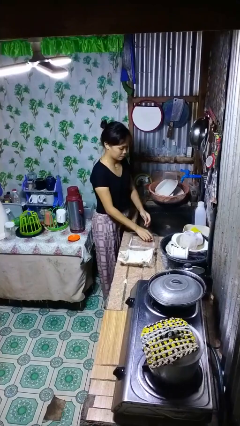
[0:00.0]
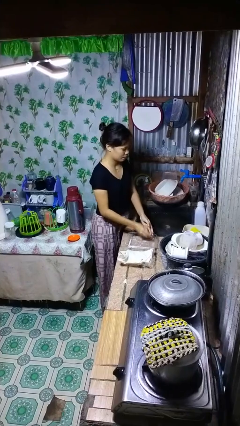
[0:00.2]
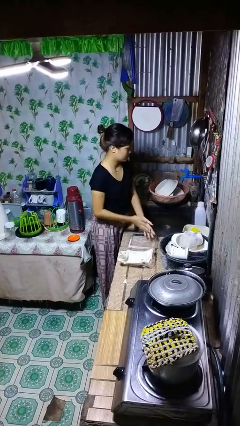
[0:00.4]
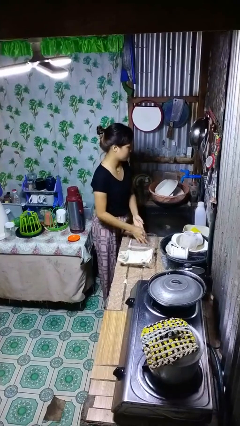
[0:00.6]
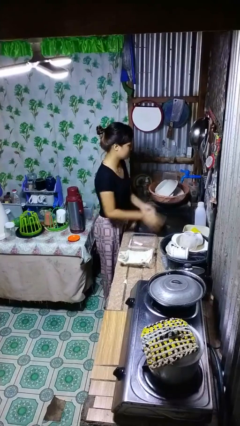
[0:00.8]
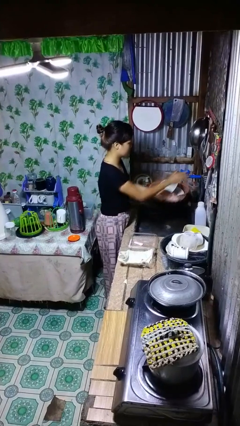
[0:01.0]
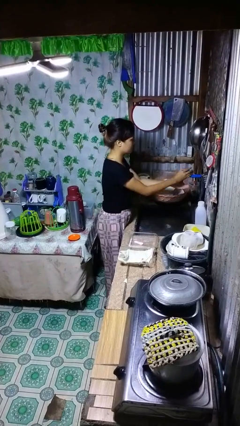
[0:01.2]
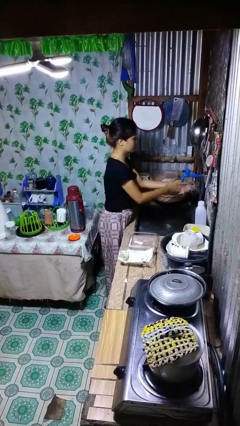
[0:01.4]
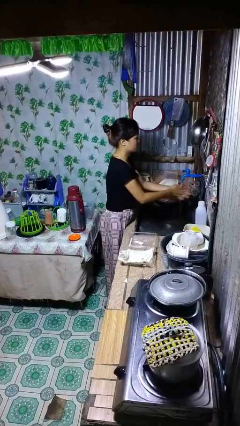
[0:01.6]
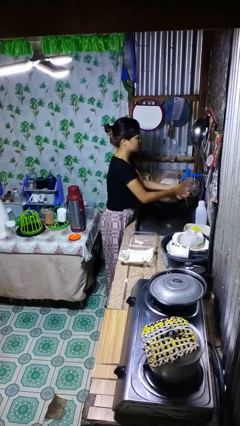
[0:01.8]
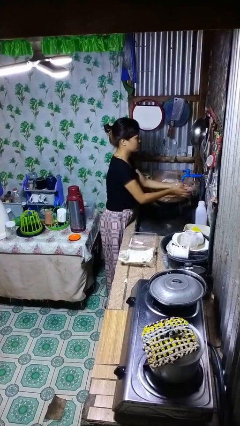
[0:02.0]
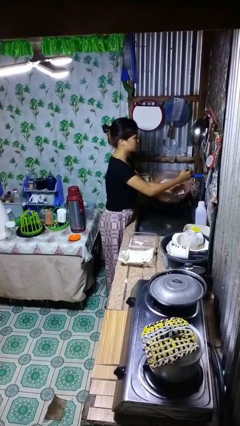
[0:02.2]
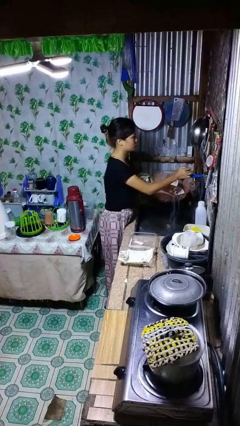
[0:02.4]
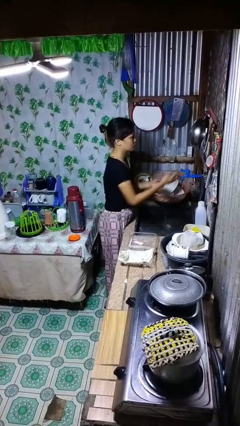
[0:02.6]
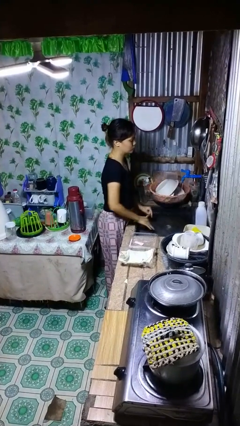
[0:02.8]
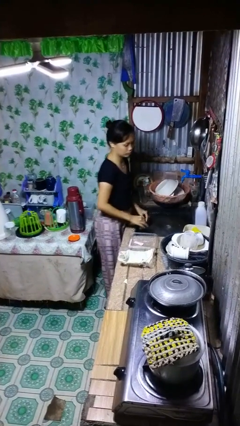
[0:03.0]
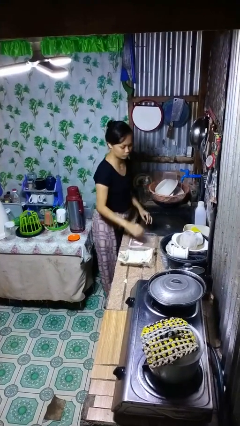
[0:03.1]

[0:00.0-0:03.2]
person washes hands

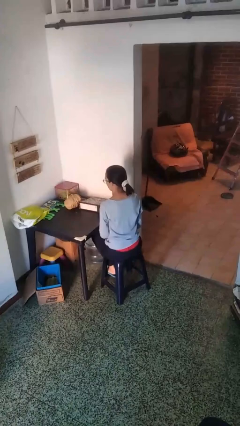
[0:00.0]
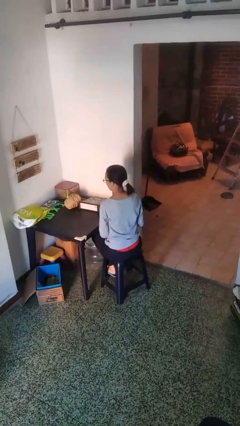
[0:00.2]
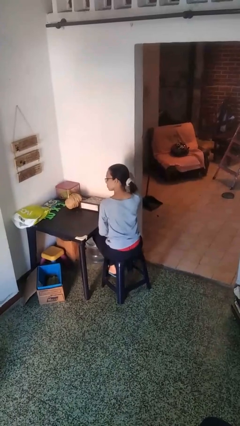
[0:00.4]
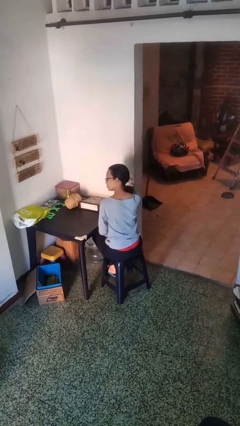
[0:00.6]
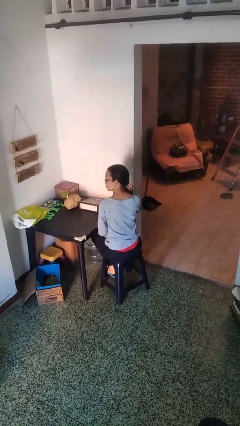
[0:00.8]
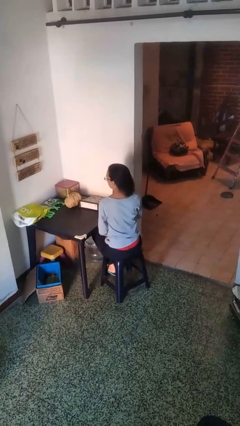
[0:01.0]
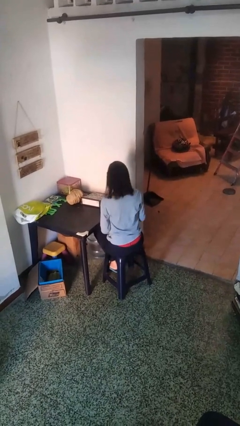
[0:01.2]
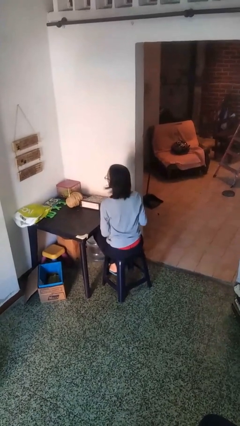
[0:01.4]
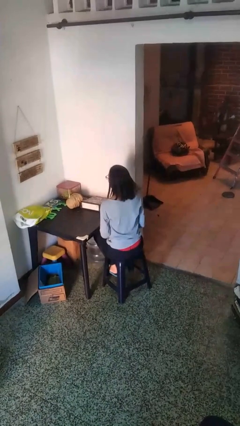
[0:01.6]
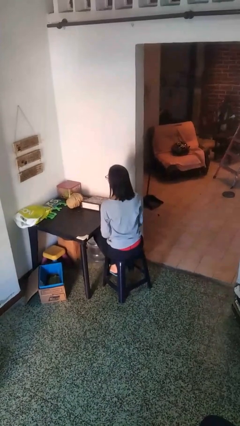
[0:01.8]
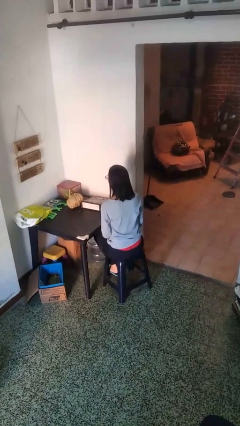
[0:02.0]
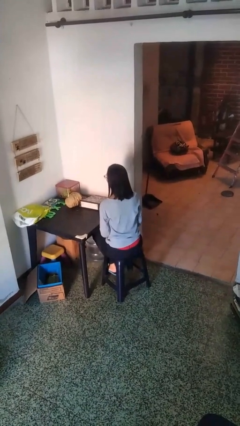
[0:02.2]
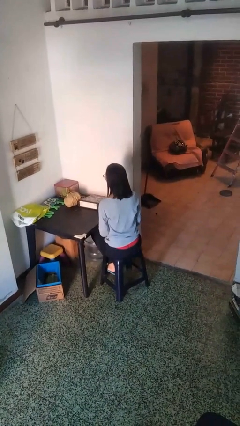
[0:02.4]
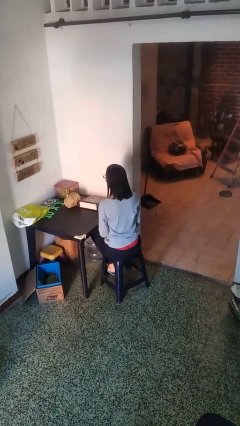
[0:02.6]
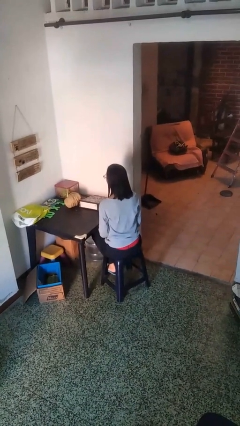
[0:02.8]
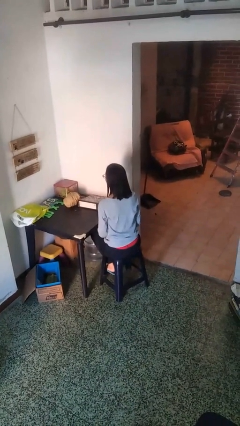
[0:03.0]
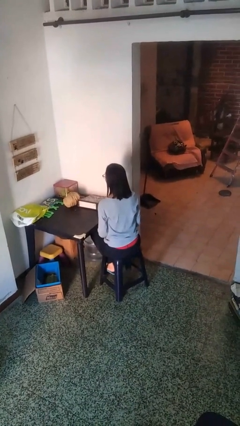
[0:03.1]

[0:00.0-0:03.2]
person takes off hairtie

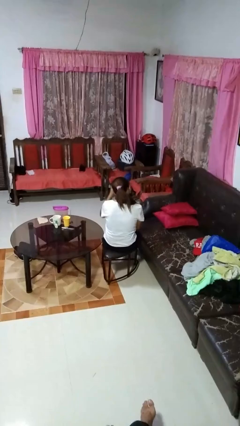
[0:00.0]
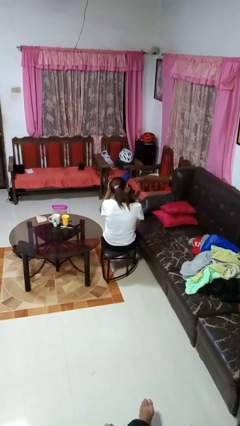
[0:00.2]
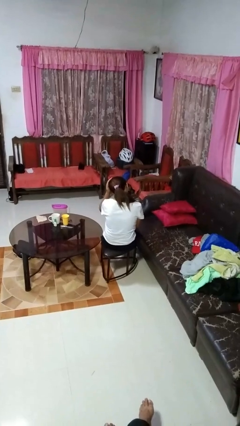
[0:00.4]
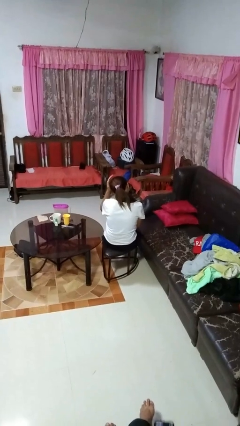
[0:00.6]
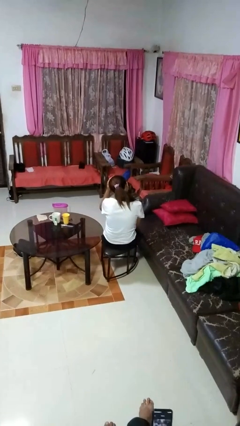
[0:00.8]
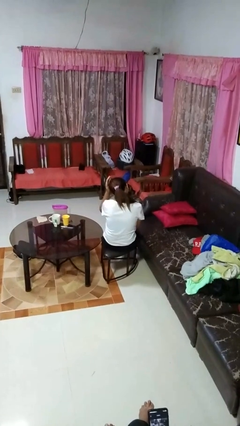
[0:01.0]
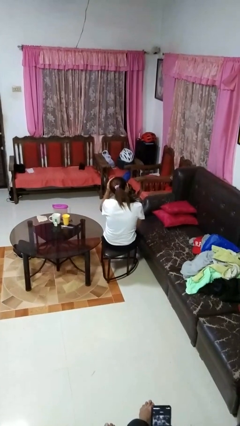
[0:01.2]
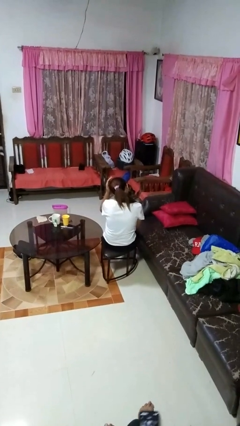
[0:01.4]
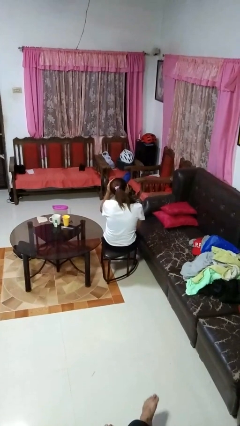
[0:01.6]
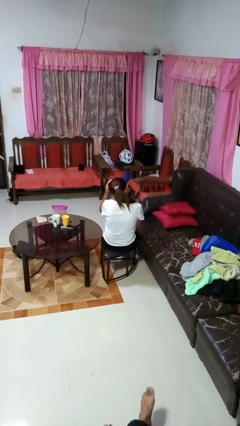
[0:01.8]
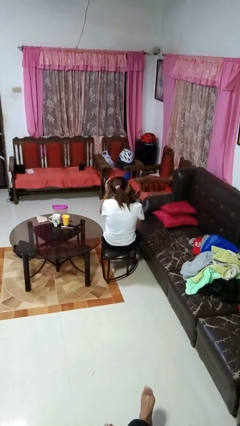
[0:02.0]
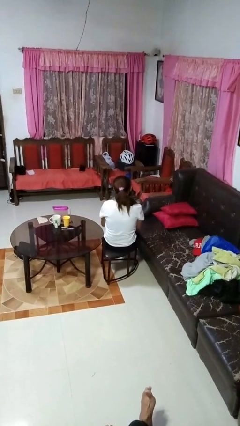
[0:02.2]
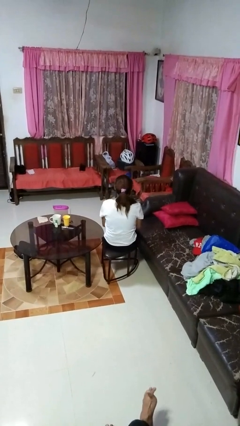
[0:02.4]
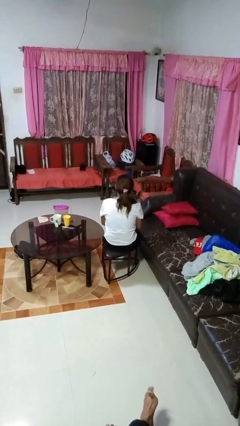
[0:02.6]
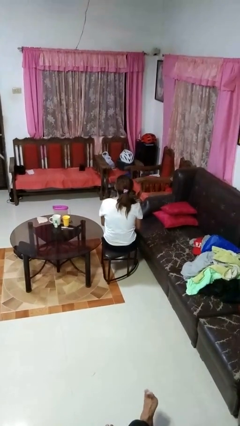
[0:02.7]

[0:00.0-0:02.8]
person pats head

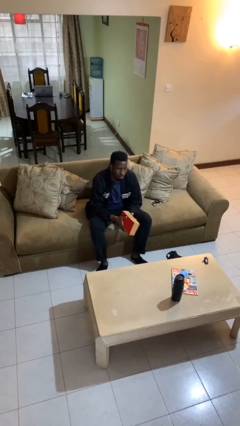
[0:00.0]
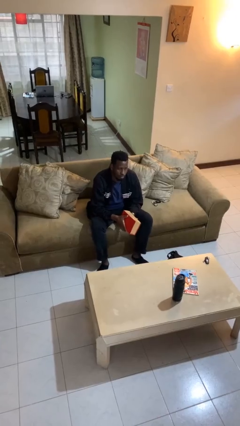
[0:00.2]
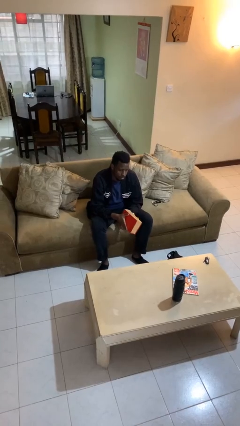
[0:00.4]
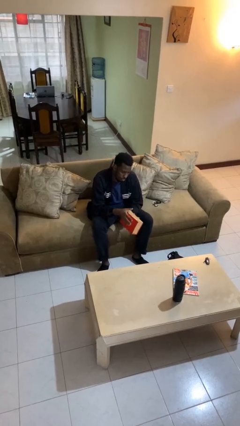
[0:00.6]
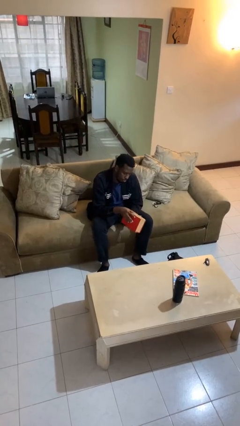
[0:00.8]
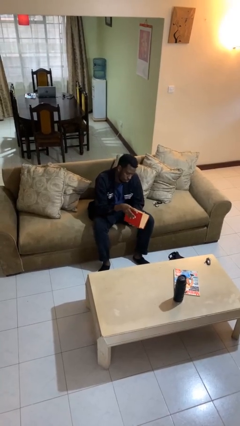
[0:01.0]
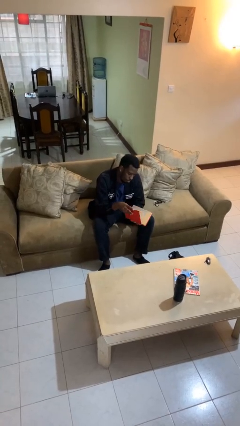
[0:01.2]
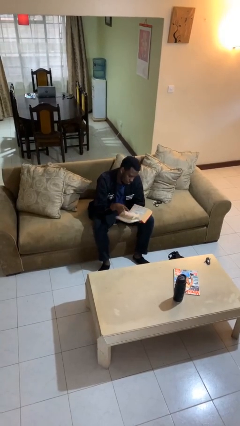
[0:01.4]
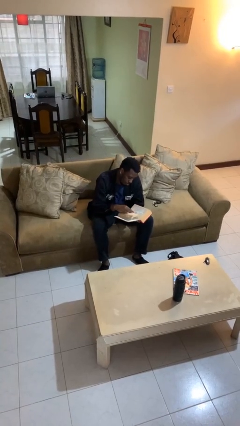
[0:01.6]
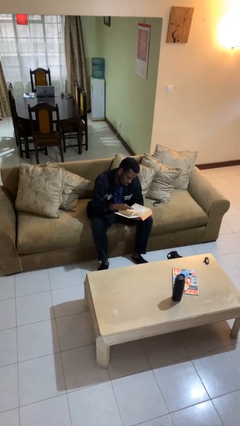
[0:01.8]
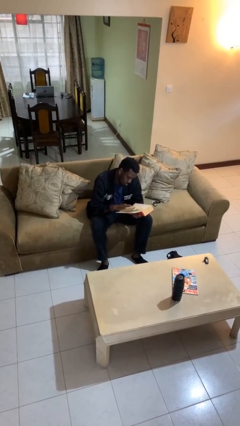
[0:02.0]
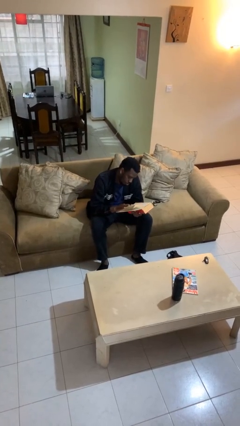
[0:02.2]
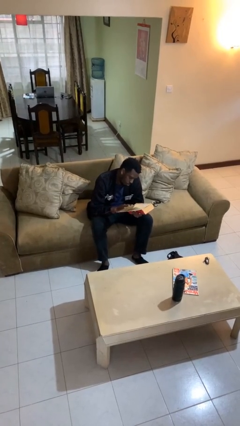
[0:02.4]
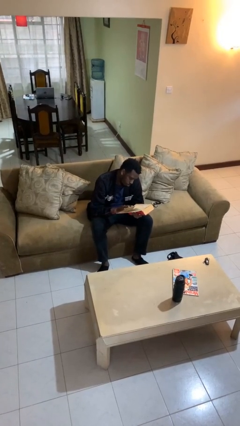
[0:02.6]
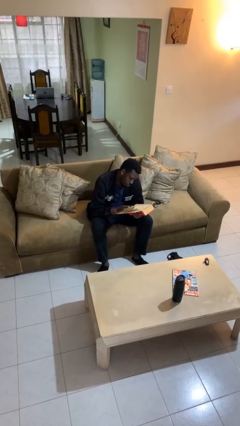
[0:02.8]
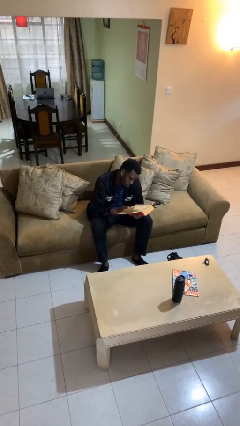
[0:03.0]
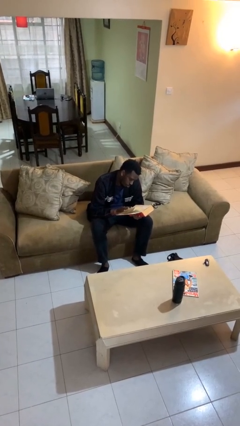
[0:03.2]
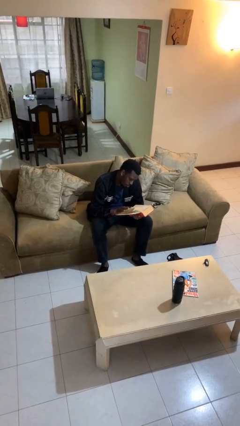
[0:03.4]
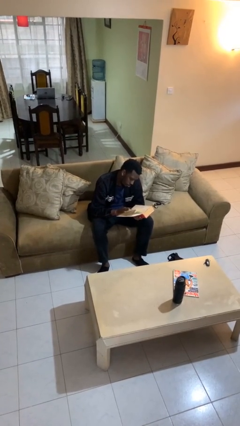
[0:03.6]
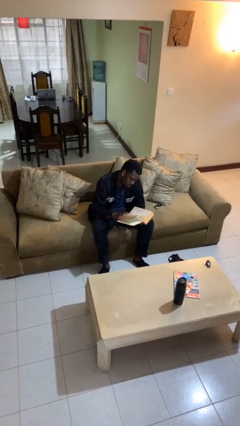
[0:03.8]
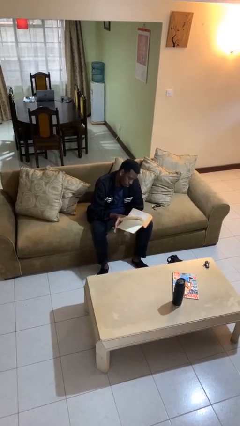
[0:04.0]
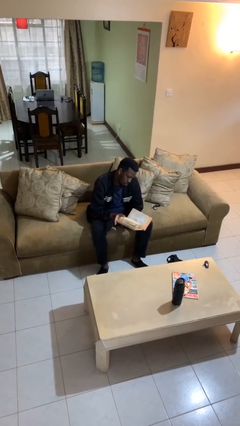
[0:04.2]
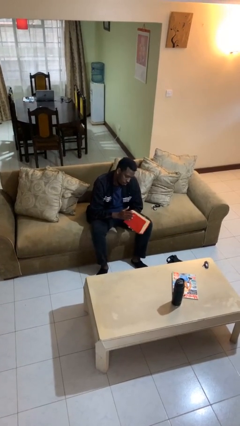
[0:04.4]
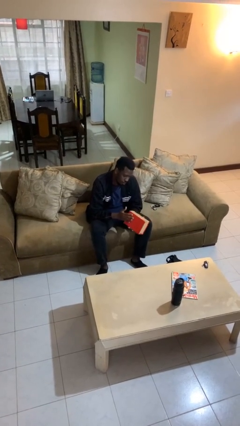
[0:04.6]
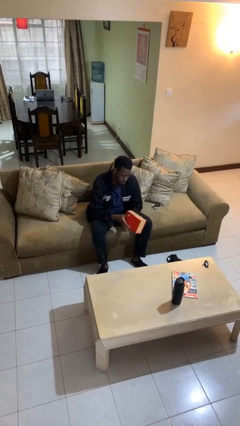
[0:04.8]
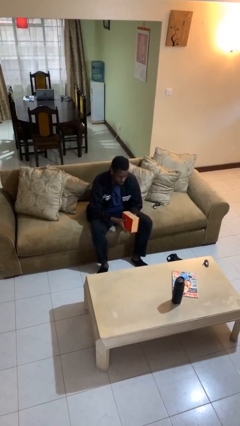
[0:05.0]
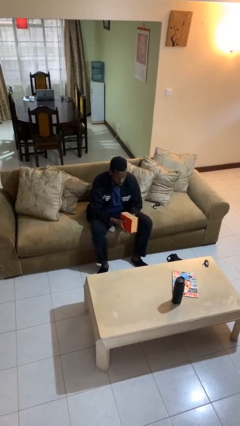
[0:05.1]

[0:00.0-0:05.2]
person reads book

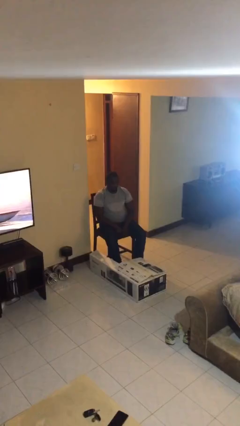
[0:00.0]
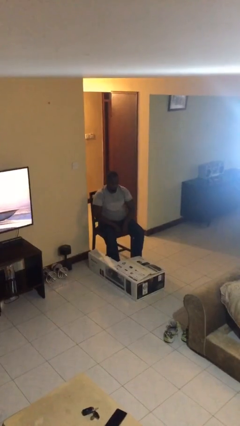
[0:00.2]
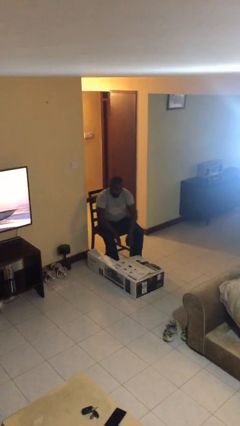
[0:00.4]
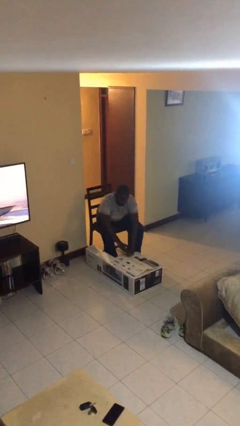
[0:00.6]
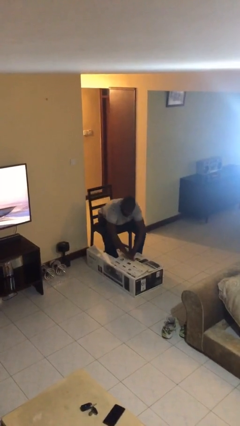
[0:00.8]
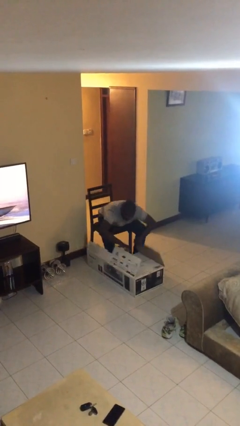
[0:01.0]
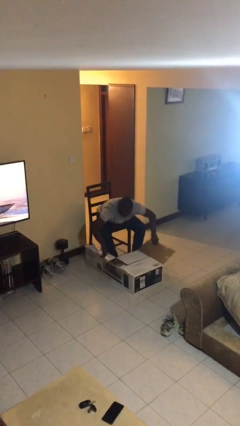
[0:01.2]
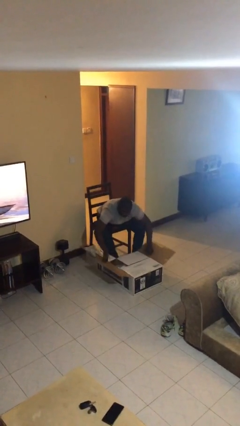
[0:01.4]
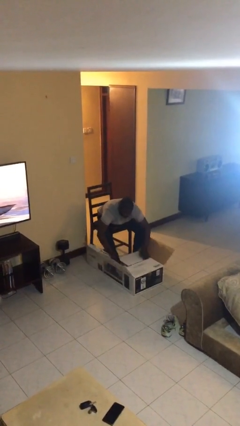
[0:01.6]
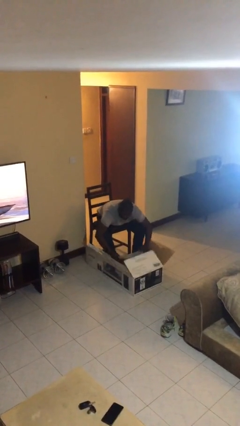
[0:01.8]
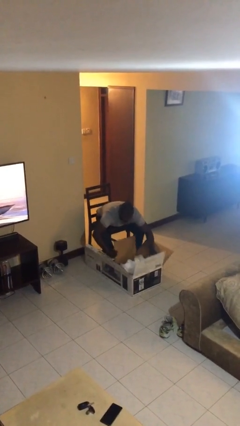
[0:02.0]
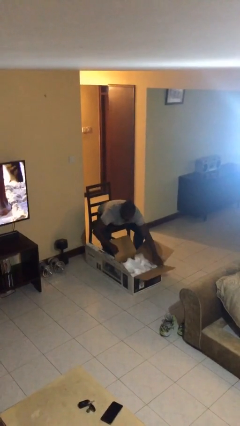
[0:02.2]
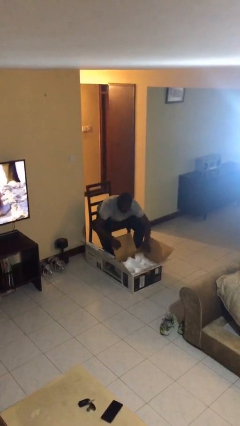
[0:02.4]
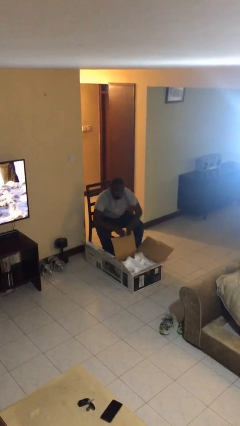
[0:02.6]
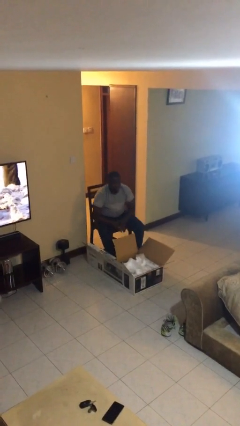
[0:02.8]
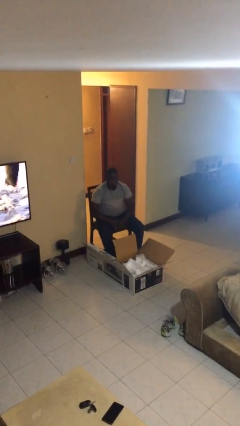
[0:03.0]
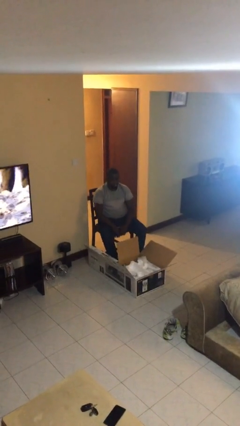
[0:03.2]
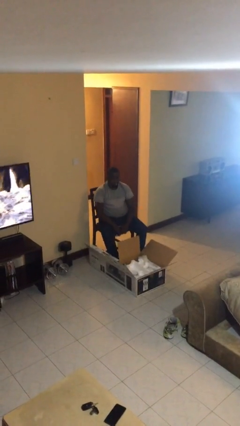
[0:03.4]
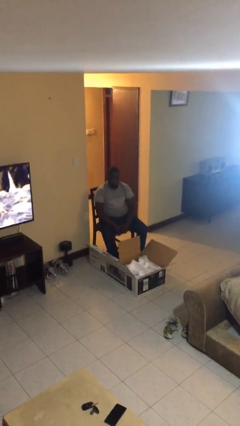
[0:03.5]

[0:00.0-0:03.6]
person opens box
